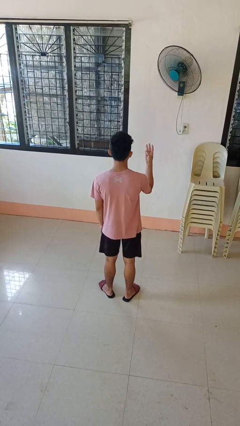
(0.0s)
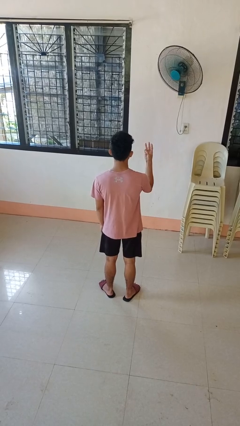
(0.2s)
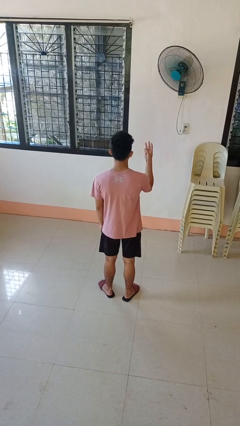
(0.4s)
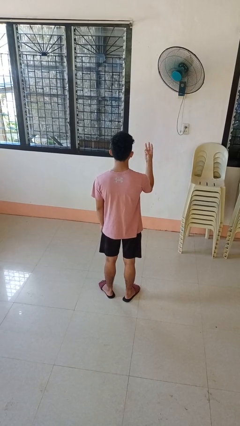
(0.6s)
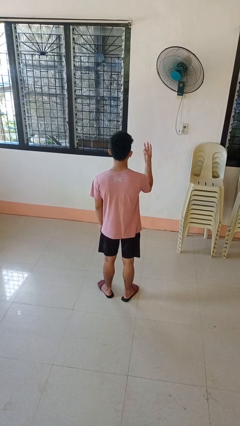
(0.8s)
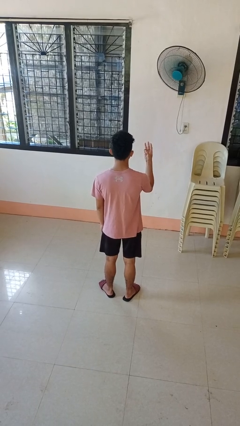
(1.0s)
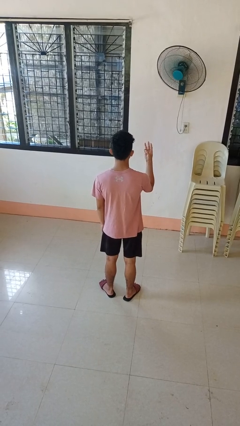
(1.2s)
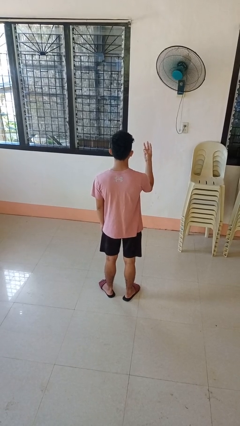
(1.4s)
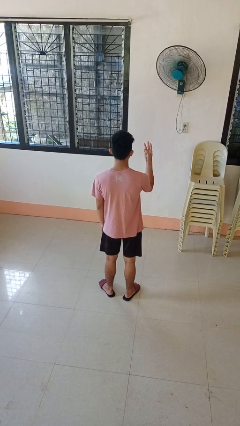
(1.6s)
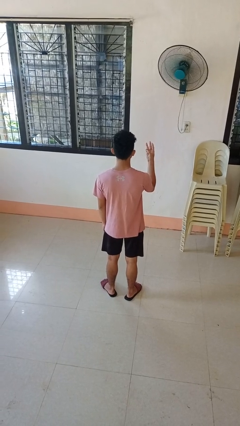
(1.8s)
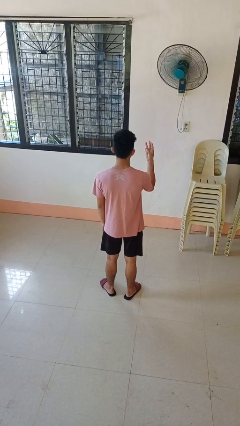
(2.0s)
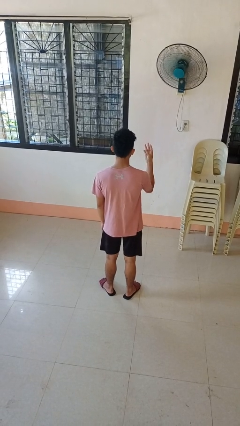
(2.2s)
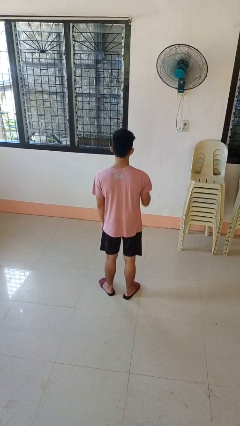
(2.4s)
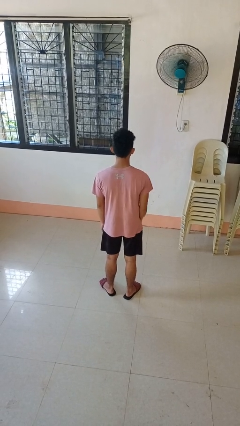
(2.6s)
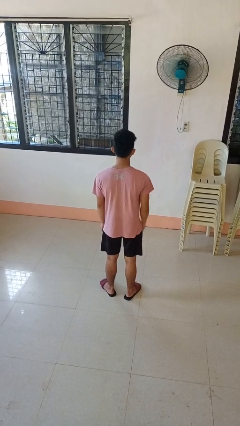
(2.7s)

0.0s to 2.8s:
person gestures number three

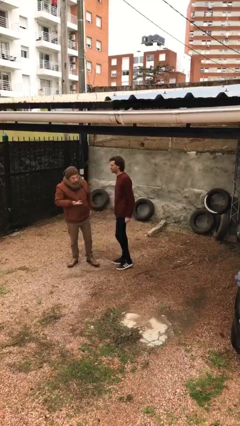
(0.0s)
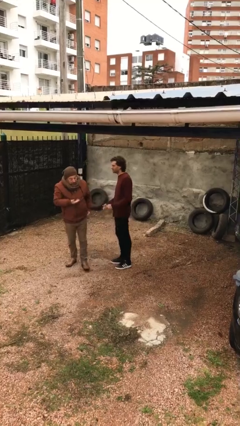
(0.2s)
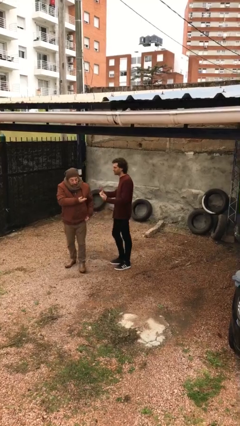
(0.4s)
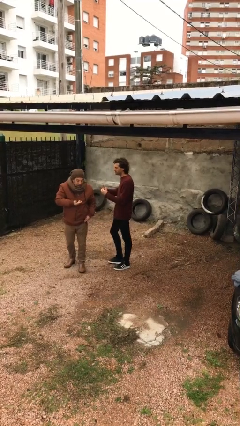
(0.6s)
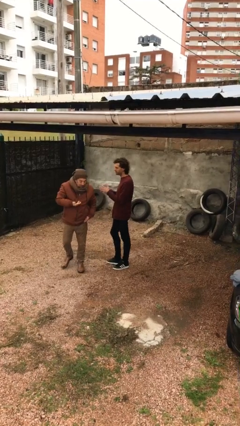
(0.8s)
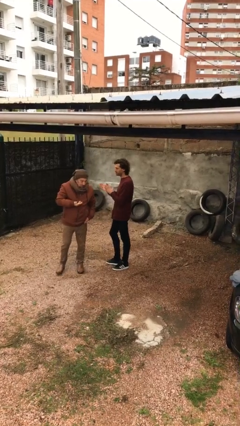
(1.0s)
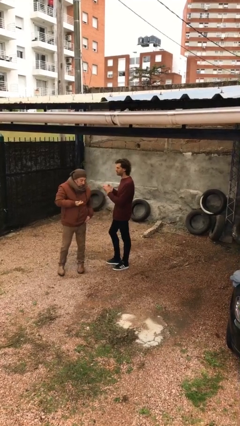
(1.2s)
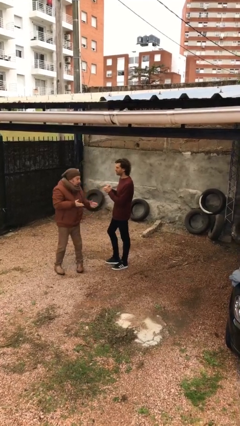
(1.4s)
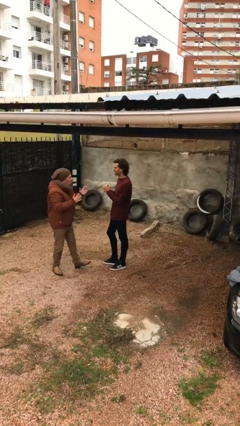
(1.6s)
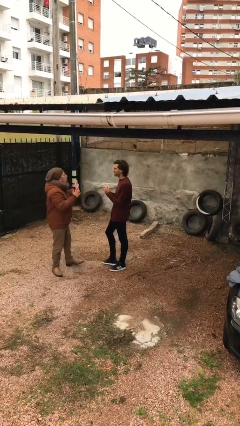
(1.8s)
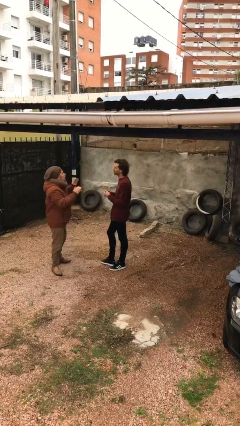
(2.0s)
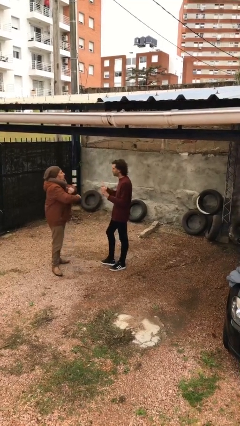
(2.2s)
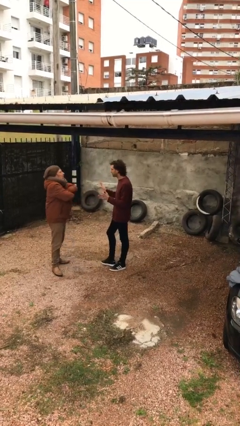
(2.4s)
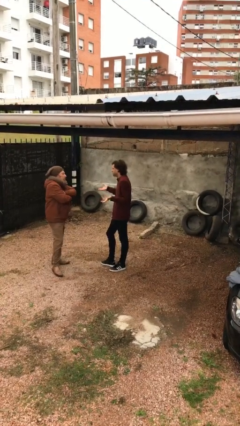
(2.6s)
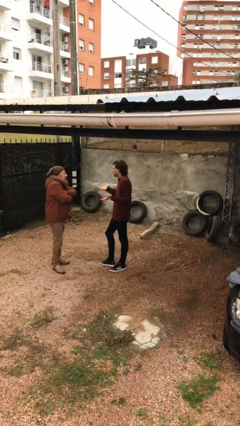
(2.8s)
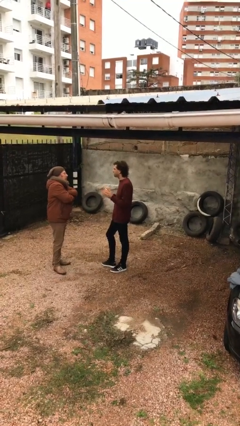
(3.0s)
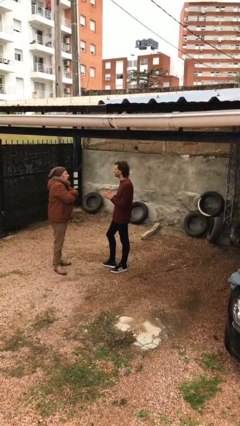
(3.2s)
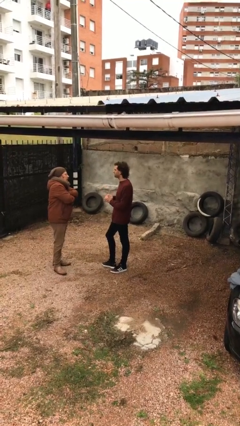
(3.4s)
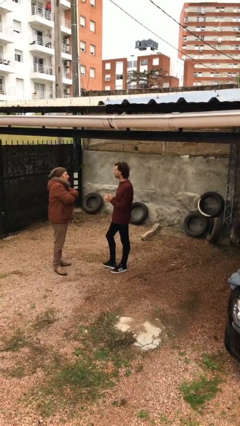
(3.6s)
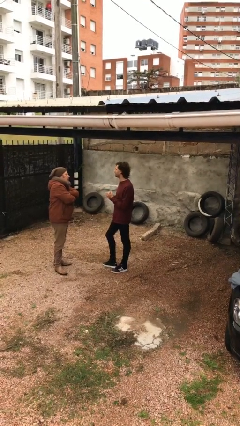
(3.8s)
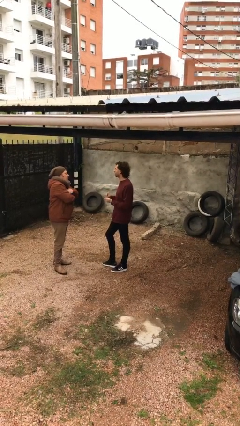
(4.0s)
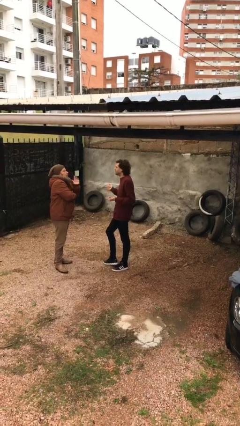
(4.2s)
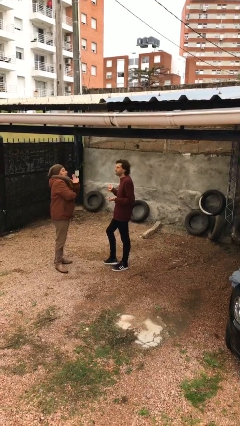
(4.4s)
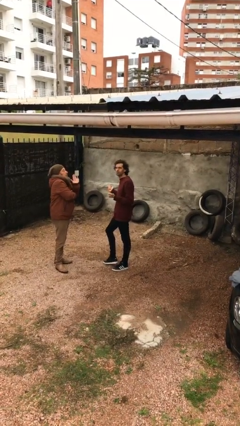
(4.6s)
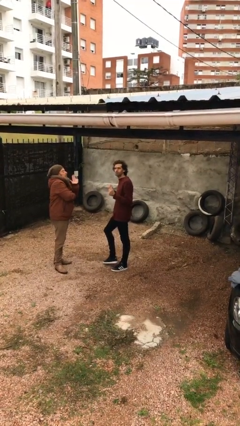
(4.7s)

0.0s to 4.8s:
person talks to person

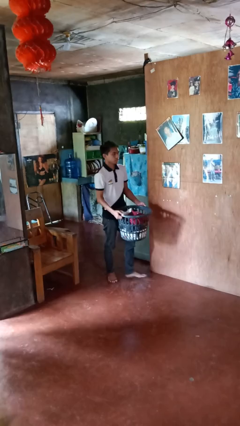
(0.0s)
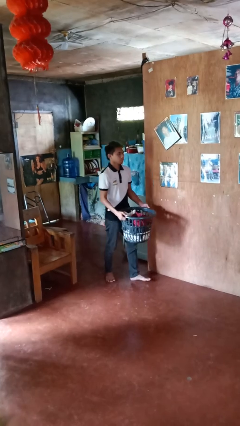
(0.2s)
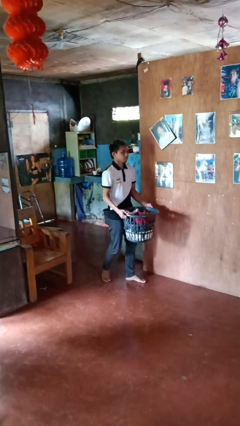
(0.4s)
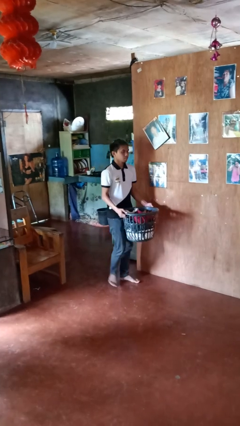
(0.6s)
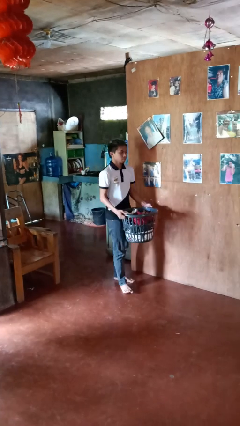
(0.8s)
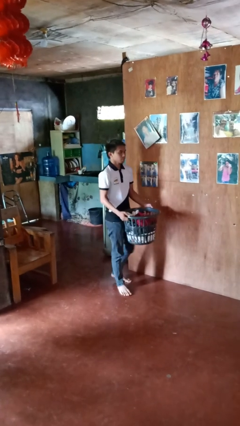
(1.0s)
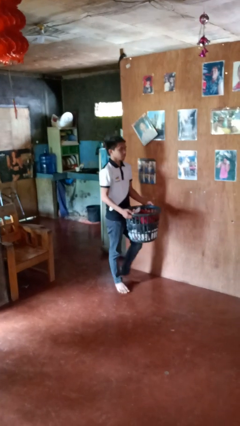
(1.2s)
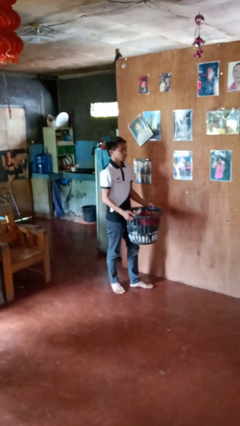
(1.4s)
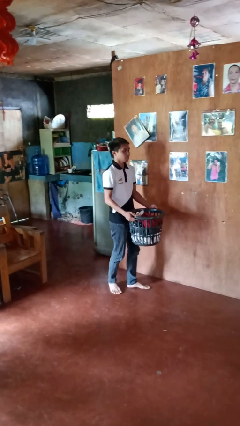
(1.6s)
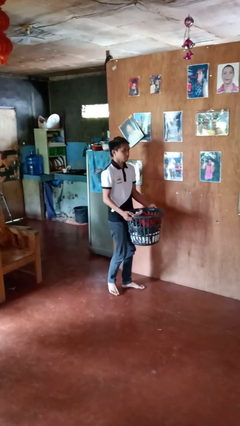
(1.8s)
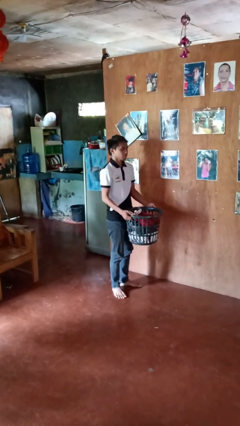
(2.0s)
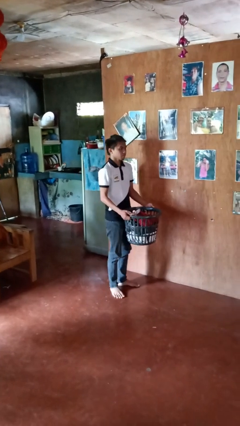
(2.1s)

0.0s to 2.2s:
person carries laundry basket

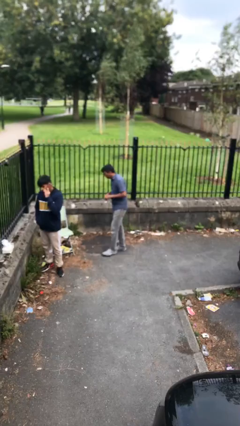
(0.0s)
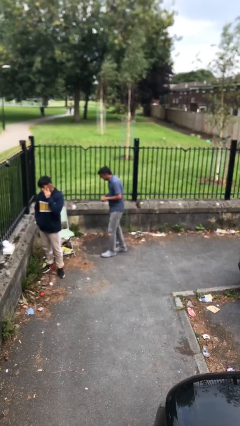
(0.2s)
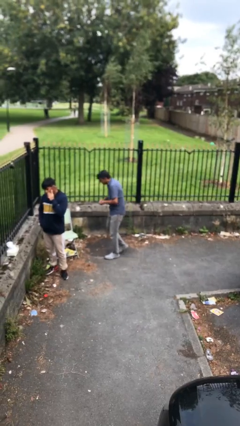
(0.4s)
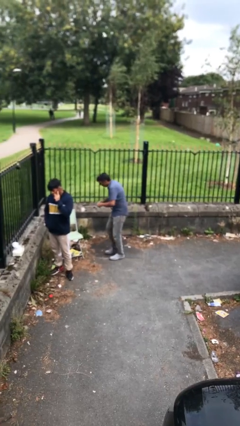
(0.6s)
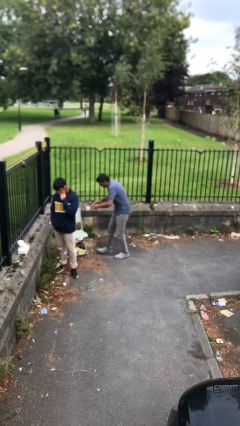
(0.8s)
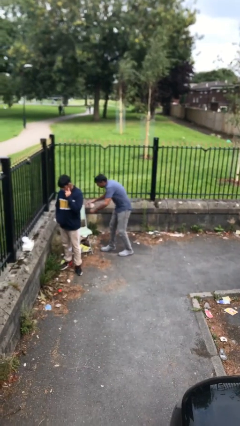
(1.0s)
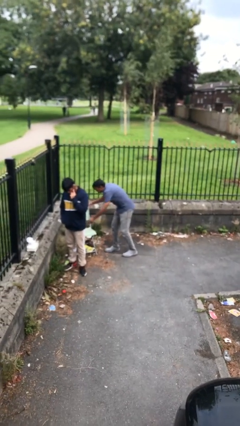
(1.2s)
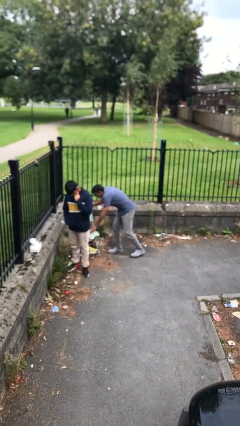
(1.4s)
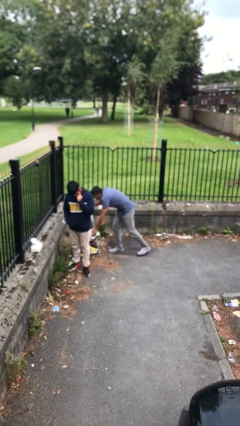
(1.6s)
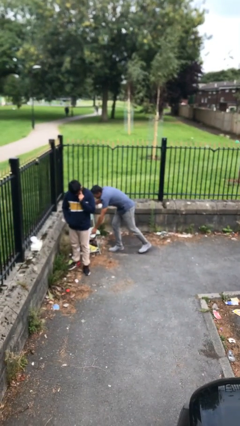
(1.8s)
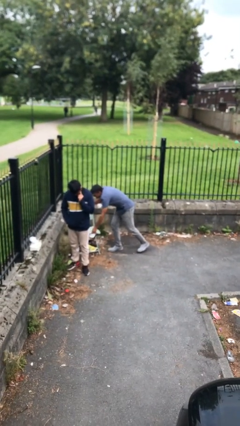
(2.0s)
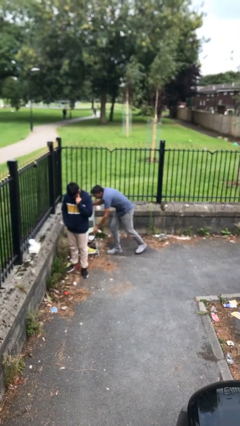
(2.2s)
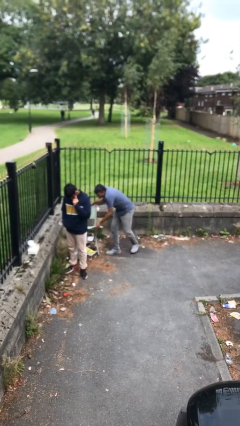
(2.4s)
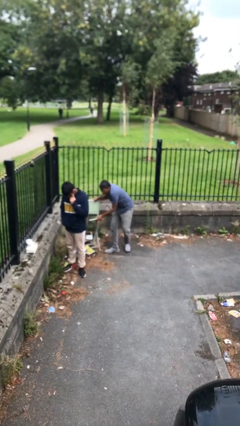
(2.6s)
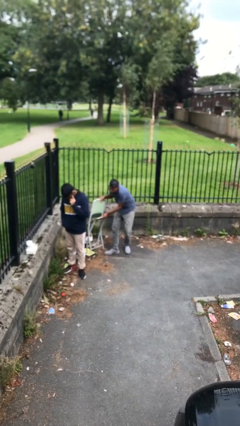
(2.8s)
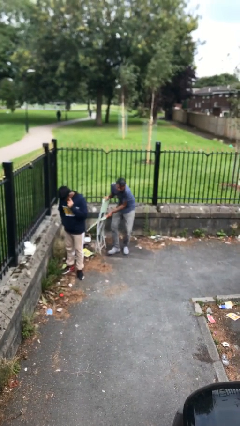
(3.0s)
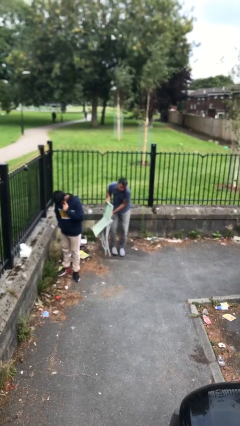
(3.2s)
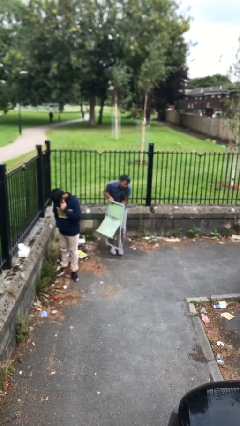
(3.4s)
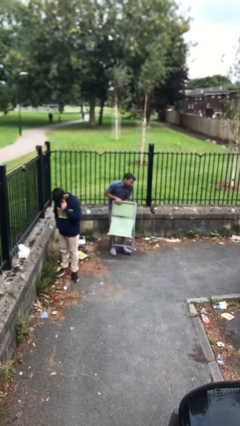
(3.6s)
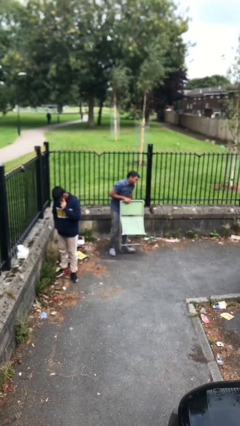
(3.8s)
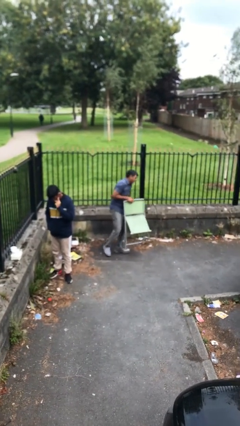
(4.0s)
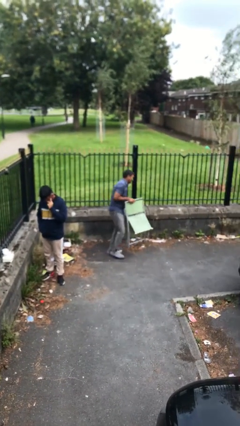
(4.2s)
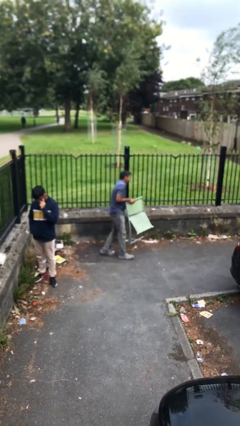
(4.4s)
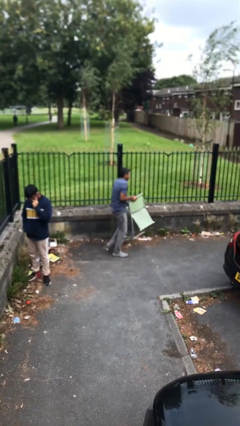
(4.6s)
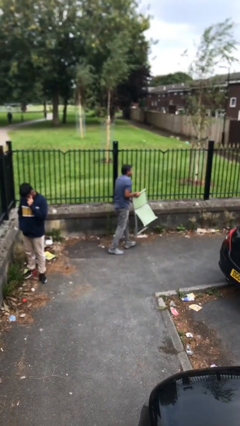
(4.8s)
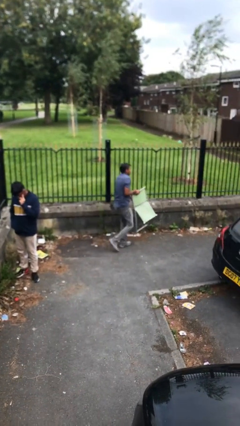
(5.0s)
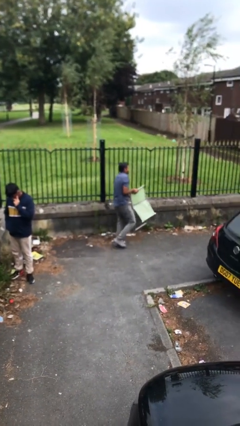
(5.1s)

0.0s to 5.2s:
person steals object from person

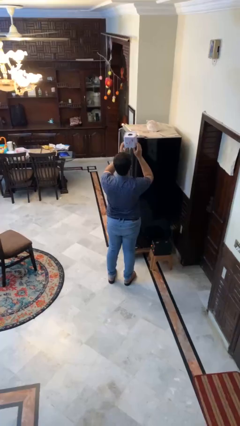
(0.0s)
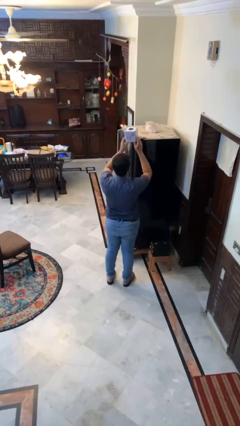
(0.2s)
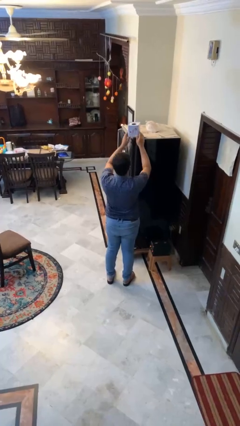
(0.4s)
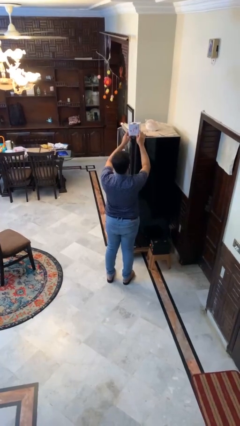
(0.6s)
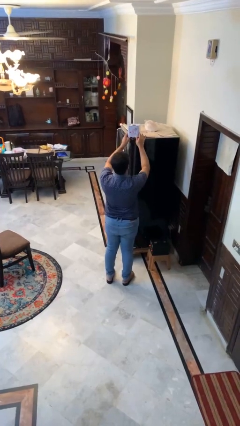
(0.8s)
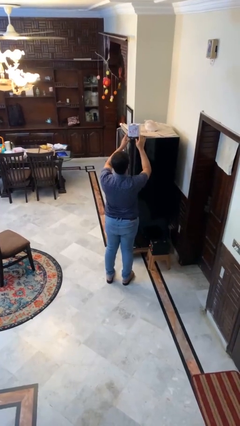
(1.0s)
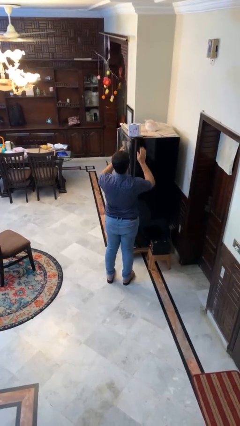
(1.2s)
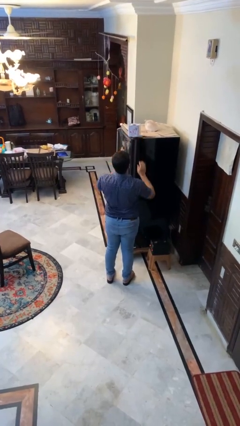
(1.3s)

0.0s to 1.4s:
person puts down object on shelf

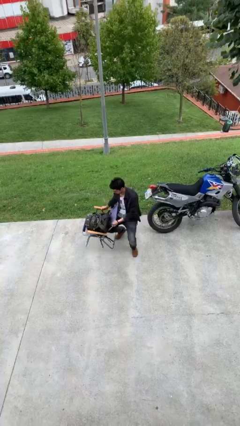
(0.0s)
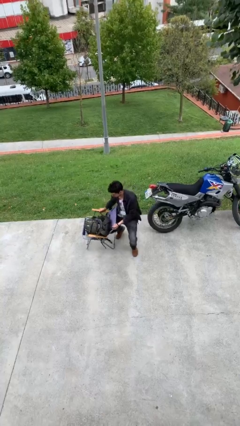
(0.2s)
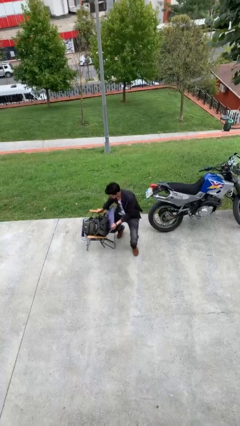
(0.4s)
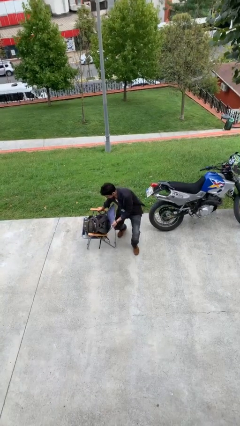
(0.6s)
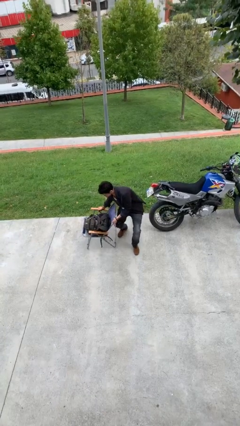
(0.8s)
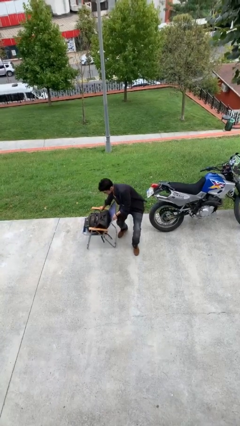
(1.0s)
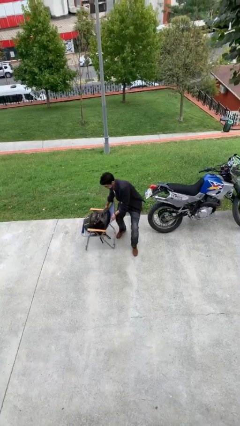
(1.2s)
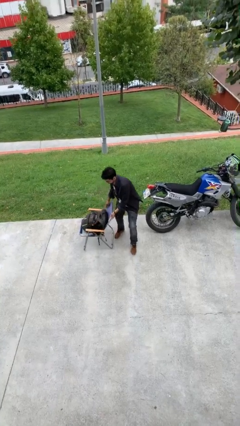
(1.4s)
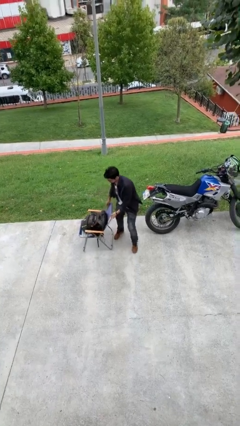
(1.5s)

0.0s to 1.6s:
person puts down object on floor
